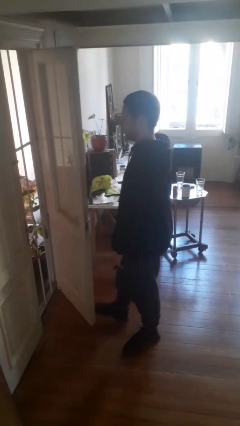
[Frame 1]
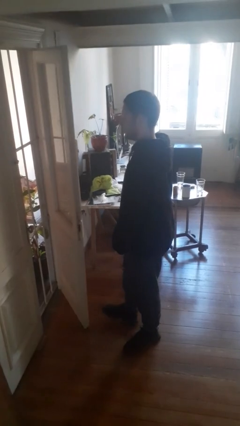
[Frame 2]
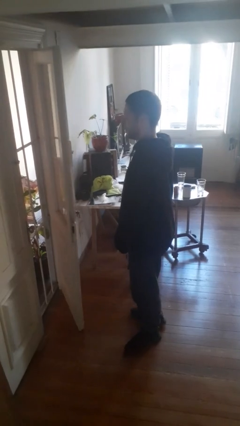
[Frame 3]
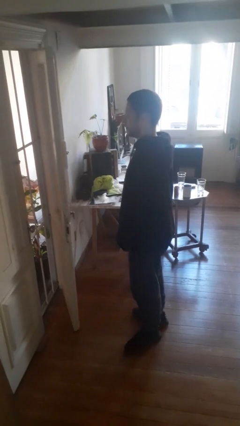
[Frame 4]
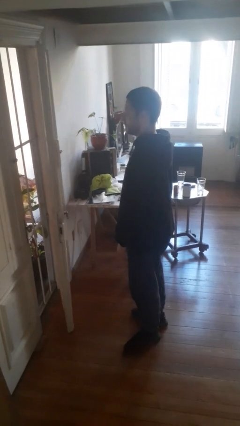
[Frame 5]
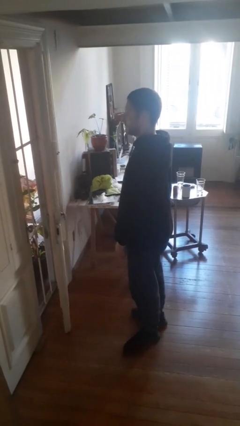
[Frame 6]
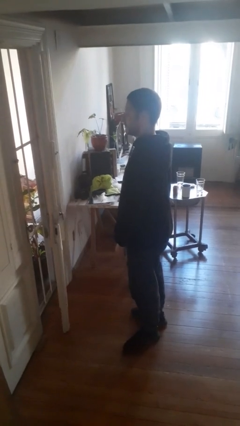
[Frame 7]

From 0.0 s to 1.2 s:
person closes door with foot

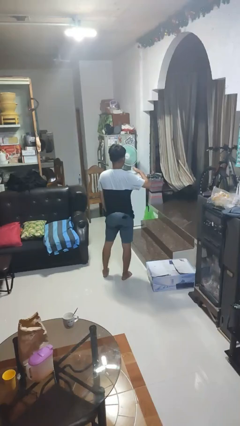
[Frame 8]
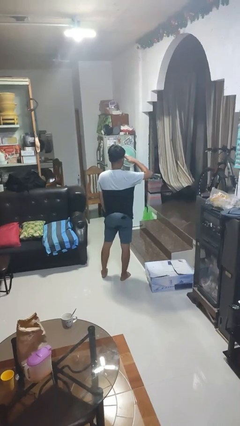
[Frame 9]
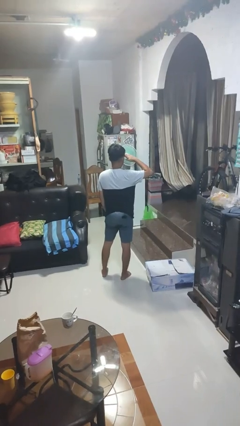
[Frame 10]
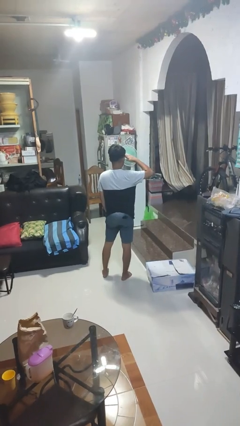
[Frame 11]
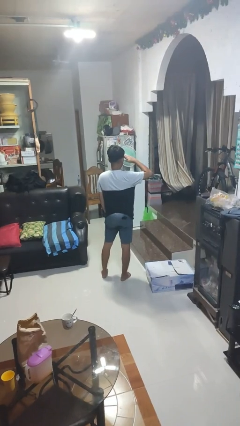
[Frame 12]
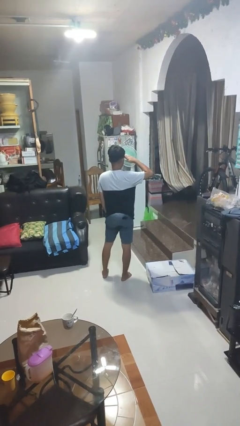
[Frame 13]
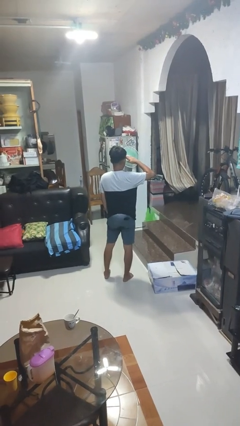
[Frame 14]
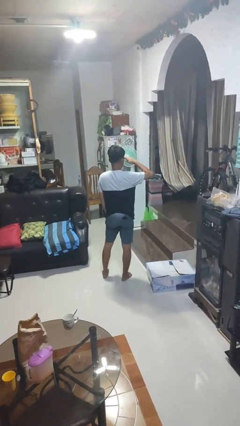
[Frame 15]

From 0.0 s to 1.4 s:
person salutes

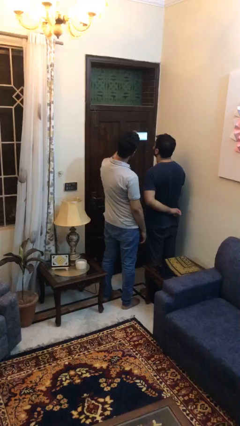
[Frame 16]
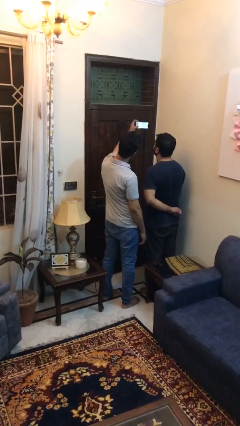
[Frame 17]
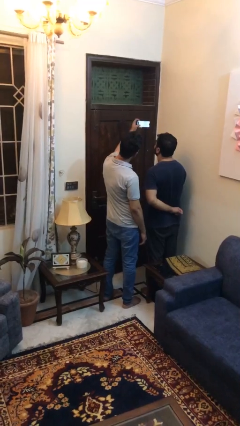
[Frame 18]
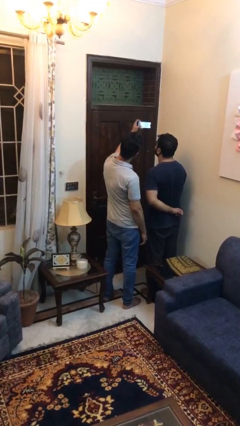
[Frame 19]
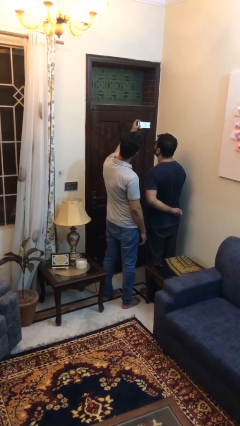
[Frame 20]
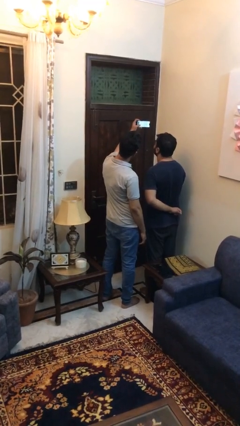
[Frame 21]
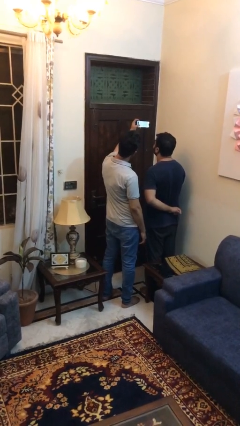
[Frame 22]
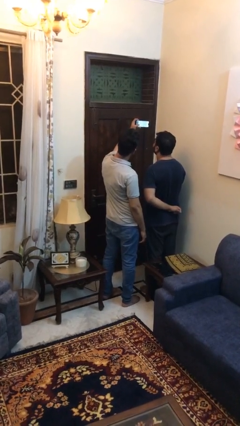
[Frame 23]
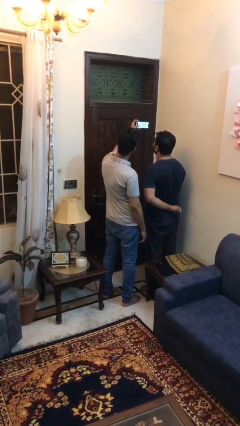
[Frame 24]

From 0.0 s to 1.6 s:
person takes selfie with person

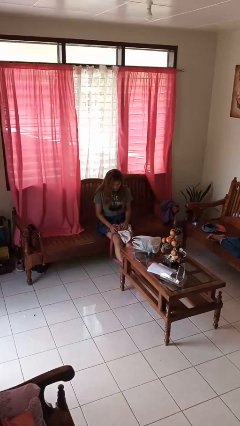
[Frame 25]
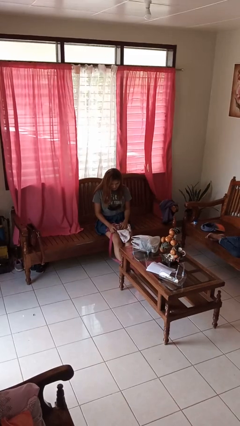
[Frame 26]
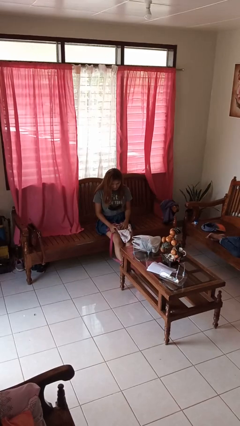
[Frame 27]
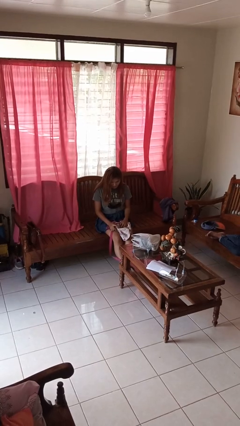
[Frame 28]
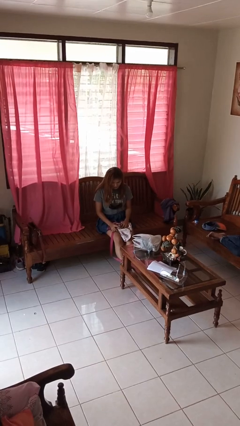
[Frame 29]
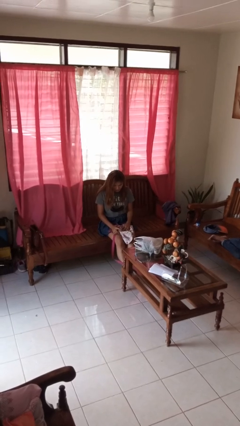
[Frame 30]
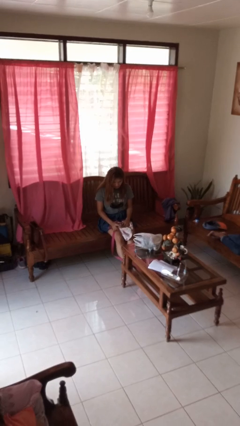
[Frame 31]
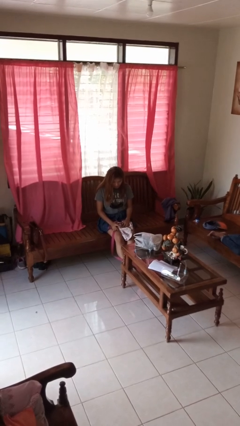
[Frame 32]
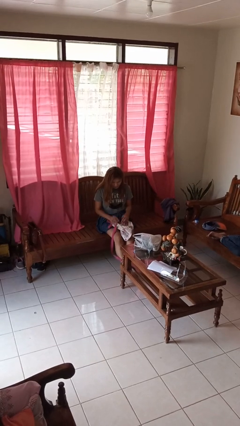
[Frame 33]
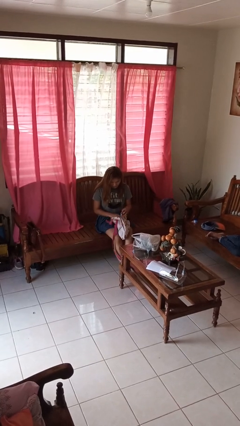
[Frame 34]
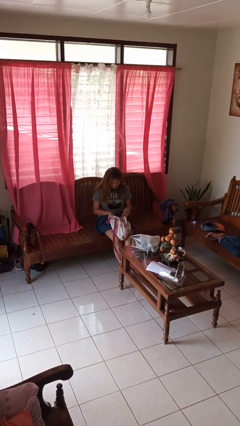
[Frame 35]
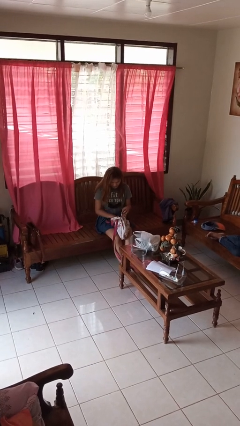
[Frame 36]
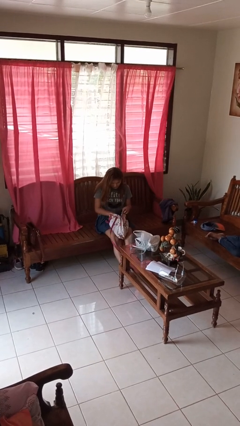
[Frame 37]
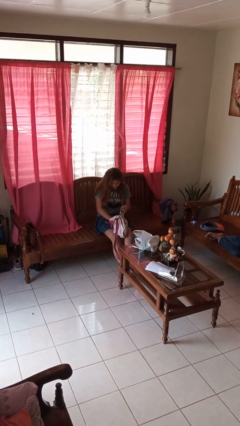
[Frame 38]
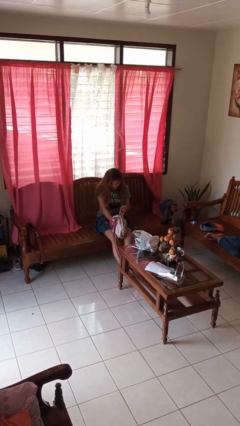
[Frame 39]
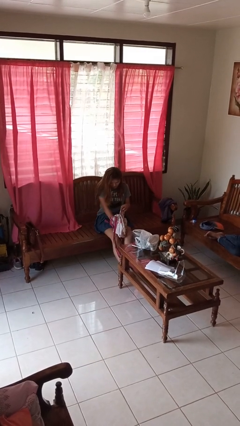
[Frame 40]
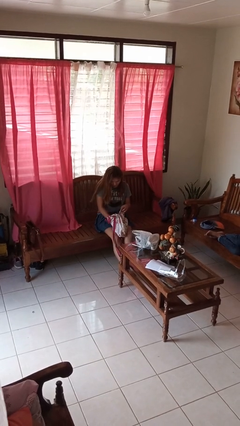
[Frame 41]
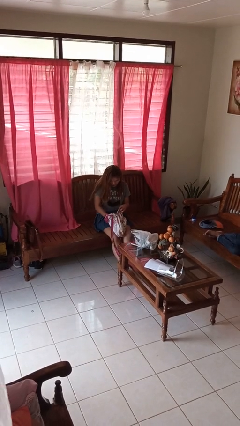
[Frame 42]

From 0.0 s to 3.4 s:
person searches in backpack

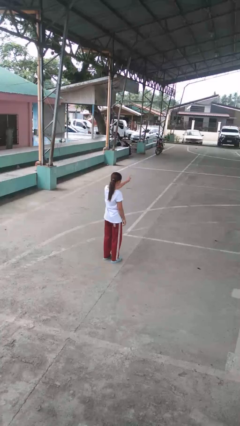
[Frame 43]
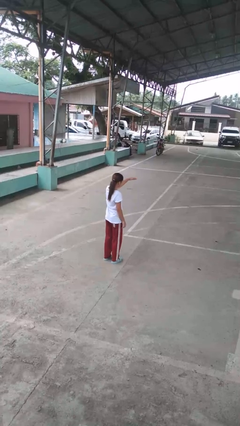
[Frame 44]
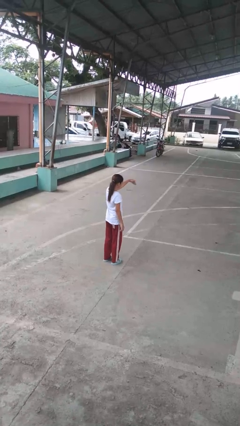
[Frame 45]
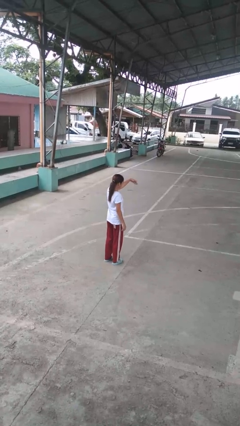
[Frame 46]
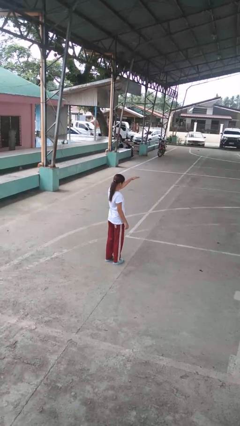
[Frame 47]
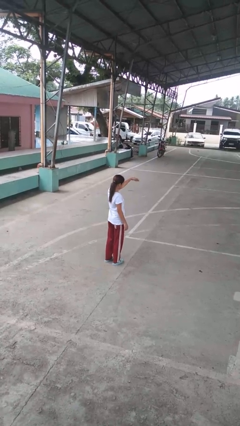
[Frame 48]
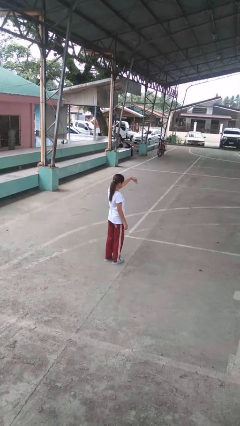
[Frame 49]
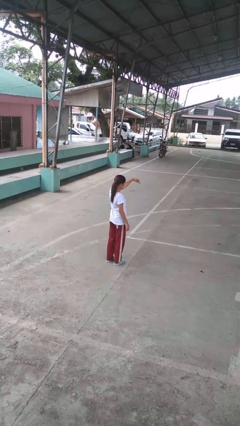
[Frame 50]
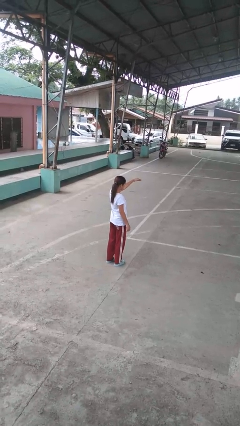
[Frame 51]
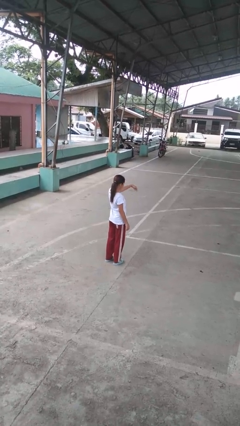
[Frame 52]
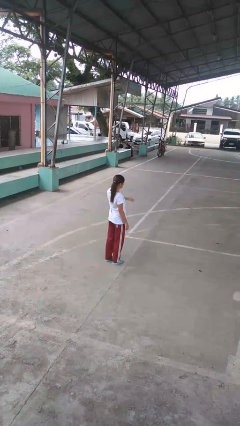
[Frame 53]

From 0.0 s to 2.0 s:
person gestures come here

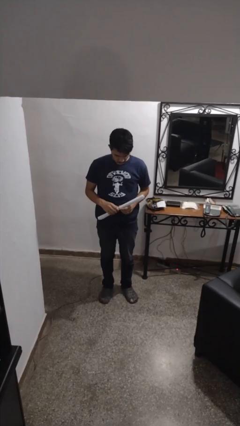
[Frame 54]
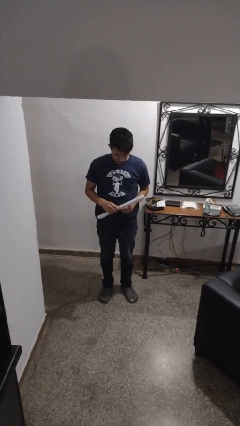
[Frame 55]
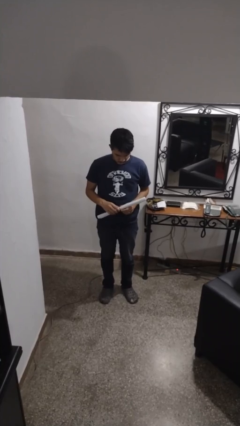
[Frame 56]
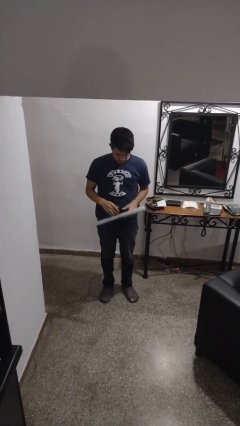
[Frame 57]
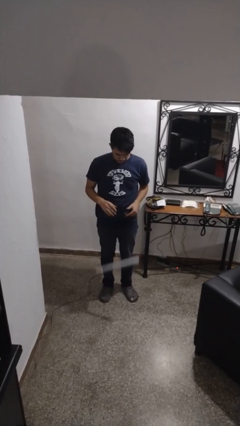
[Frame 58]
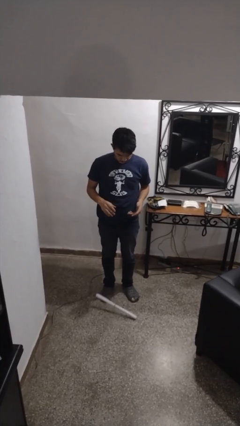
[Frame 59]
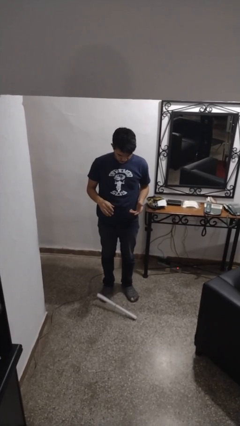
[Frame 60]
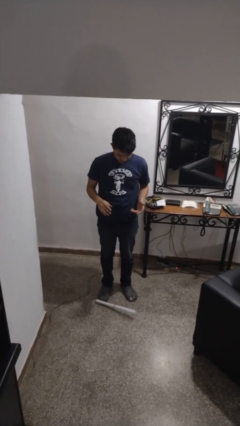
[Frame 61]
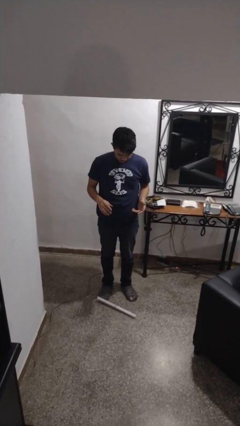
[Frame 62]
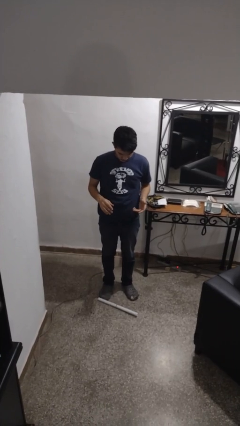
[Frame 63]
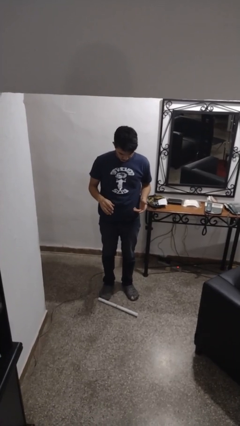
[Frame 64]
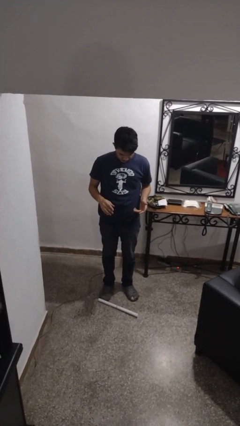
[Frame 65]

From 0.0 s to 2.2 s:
person drops object

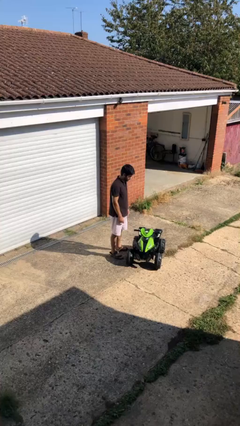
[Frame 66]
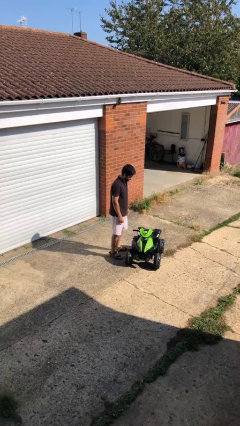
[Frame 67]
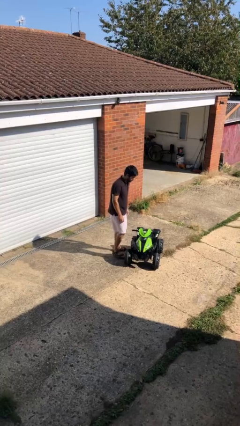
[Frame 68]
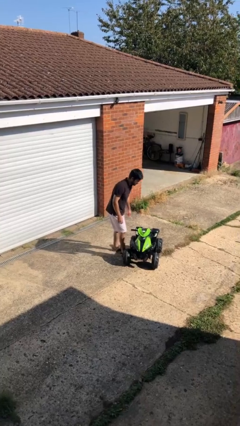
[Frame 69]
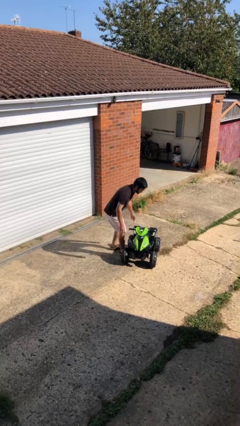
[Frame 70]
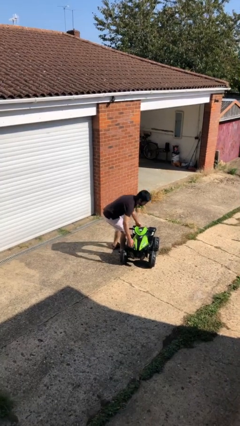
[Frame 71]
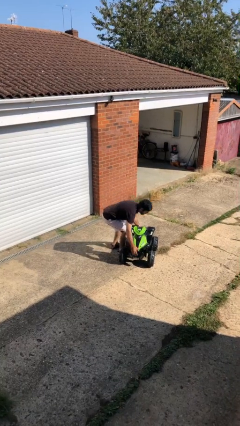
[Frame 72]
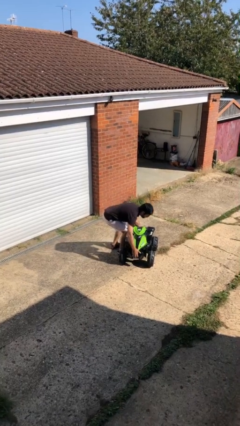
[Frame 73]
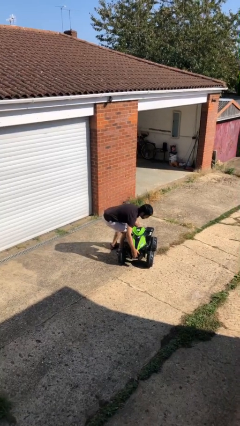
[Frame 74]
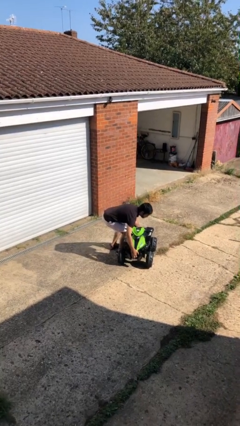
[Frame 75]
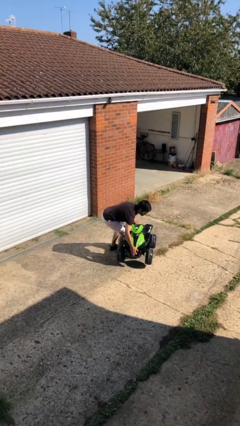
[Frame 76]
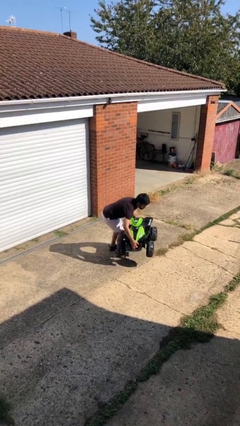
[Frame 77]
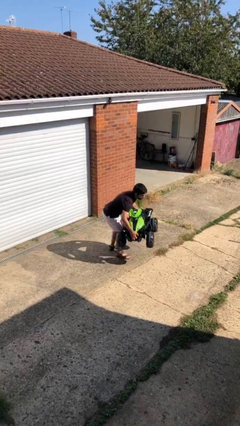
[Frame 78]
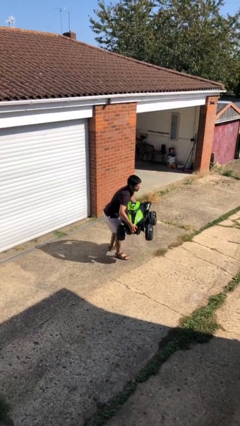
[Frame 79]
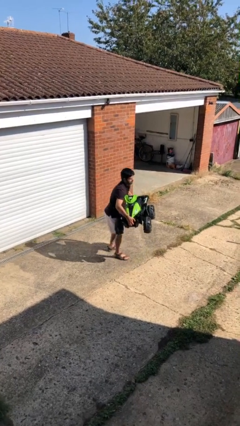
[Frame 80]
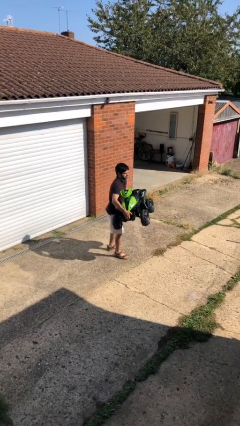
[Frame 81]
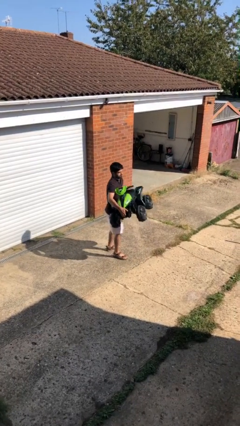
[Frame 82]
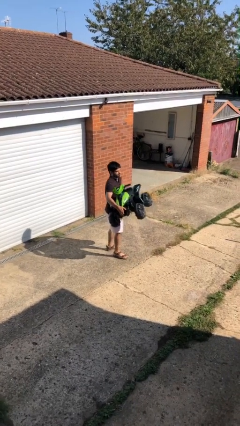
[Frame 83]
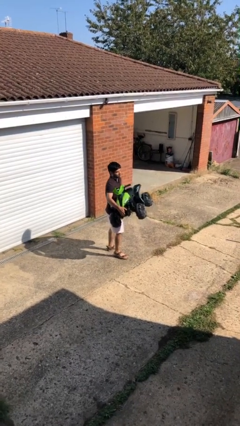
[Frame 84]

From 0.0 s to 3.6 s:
person picks up object from floor

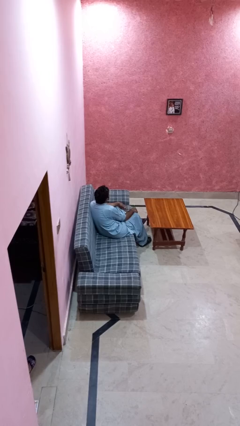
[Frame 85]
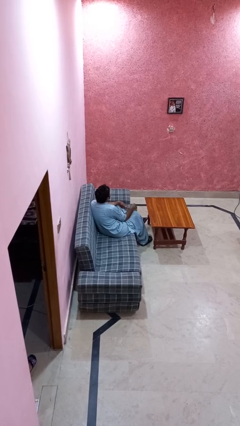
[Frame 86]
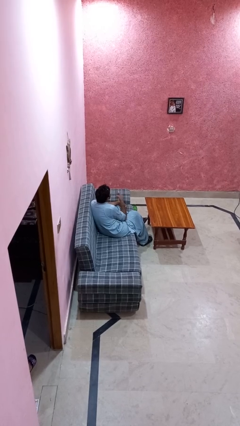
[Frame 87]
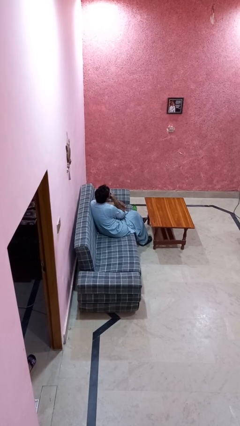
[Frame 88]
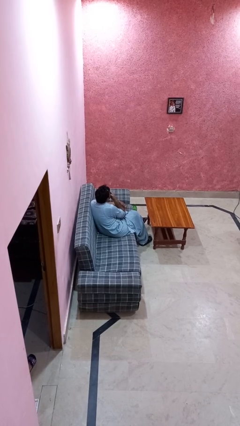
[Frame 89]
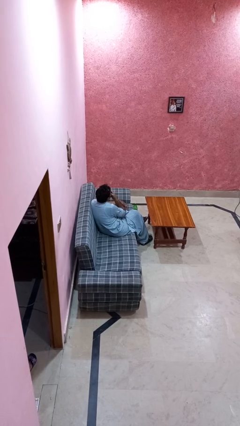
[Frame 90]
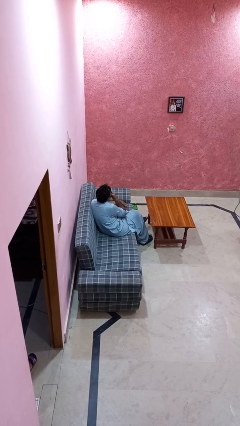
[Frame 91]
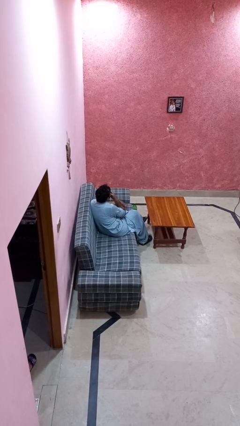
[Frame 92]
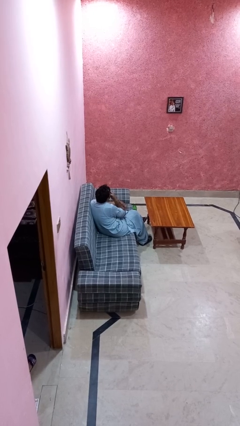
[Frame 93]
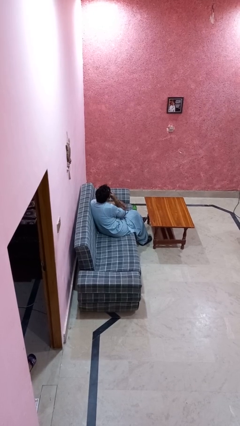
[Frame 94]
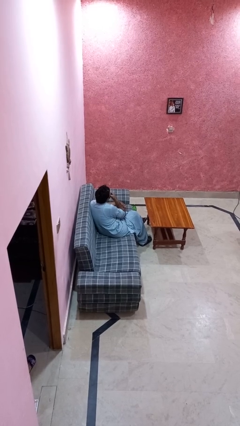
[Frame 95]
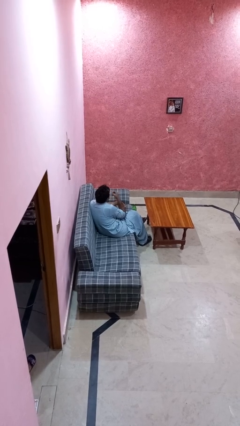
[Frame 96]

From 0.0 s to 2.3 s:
person strokes chin
